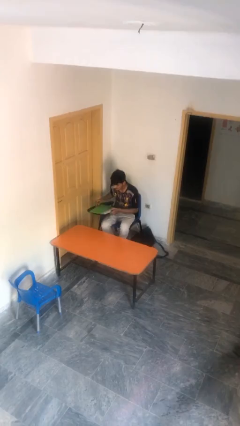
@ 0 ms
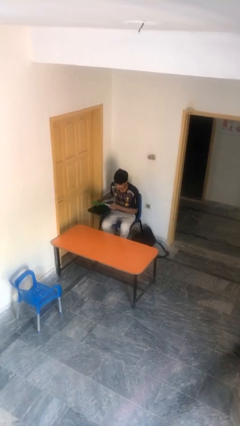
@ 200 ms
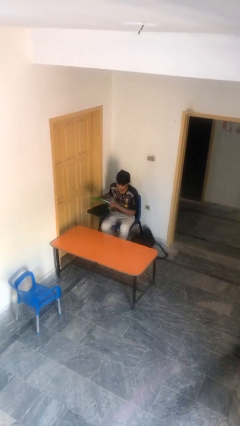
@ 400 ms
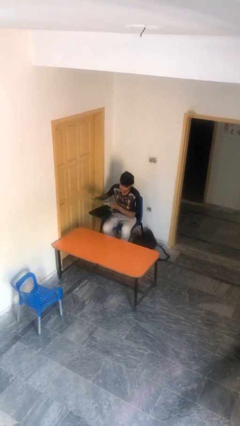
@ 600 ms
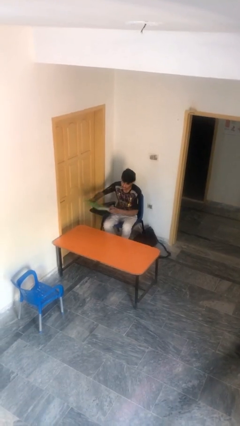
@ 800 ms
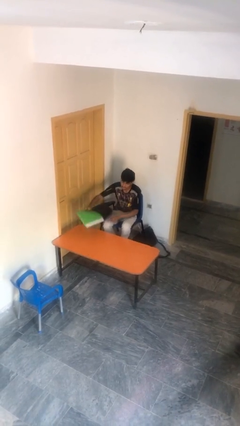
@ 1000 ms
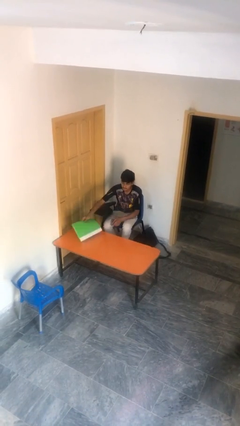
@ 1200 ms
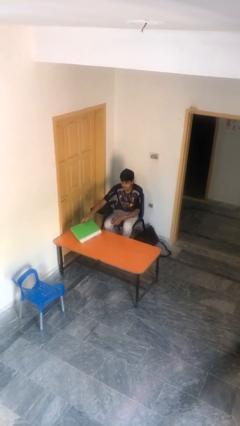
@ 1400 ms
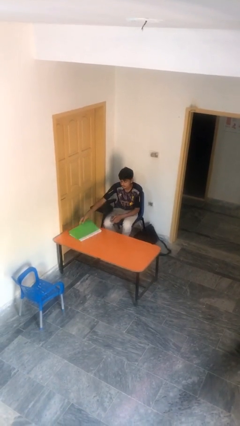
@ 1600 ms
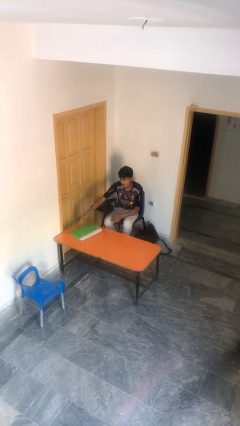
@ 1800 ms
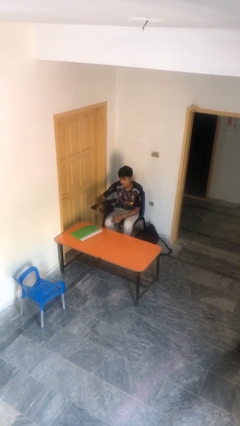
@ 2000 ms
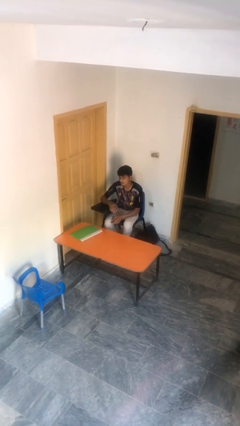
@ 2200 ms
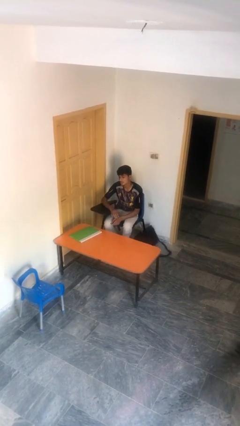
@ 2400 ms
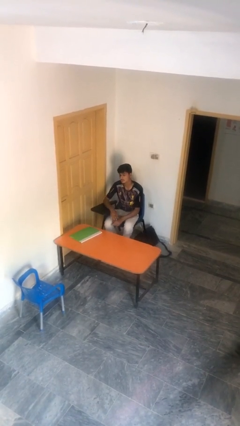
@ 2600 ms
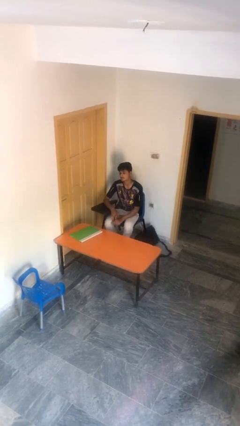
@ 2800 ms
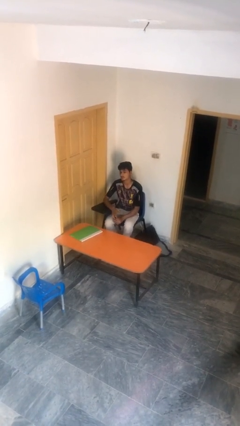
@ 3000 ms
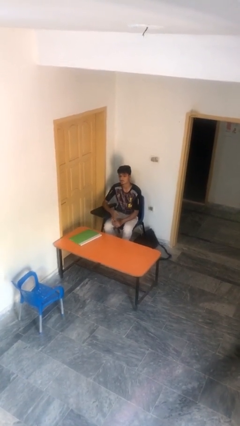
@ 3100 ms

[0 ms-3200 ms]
person puts down object on table

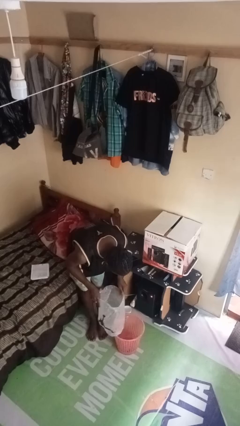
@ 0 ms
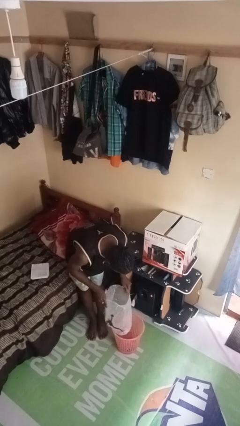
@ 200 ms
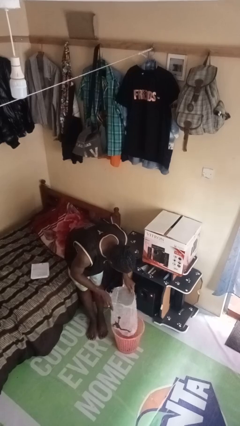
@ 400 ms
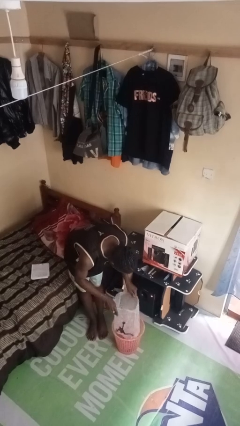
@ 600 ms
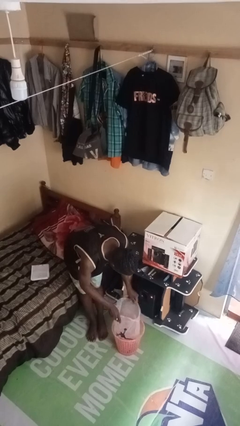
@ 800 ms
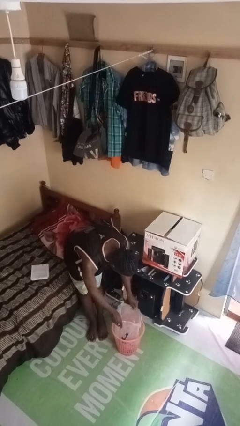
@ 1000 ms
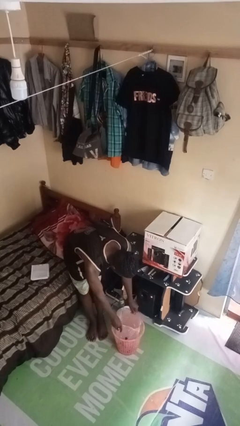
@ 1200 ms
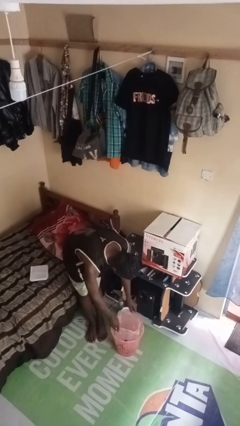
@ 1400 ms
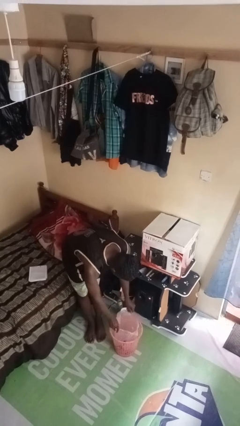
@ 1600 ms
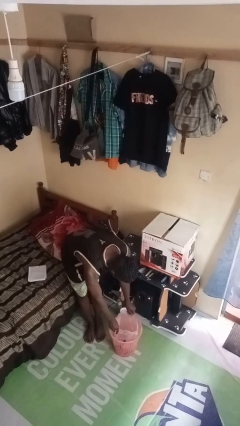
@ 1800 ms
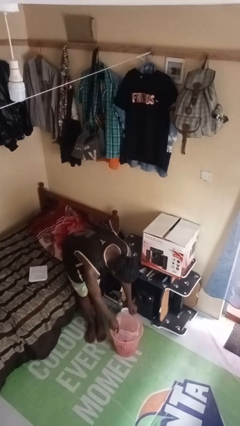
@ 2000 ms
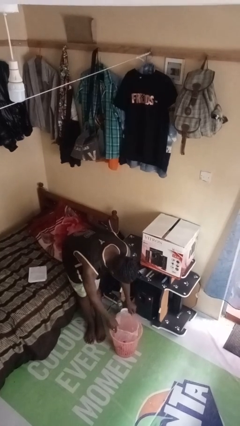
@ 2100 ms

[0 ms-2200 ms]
person inserts trashbag into trashcan

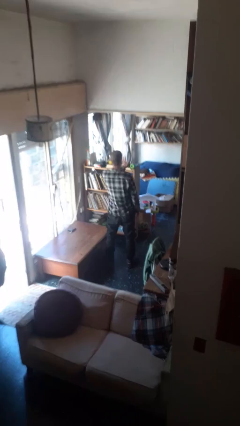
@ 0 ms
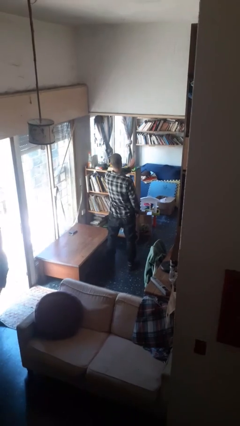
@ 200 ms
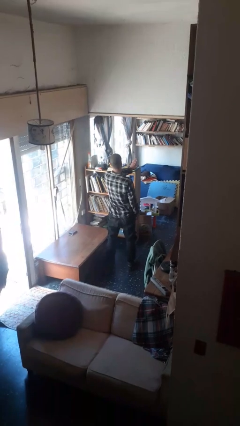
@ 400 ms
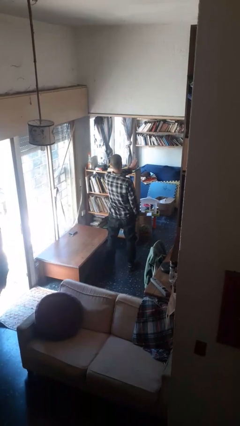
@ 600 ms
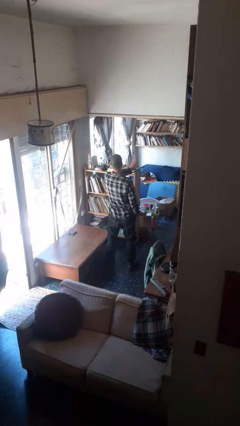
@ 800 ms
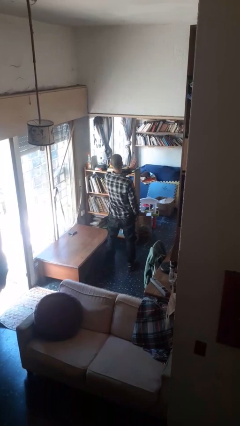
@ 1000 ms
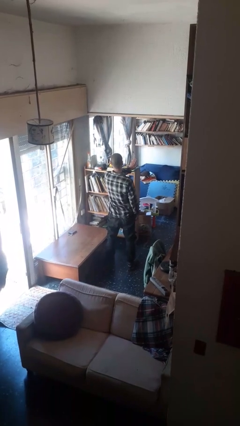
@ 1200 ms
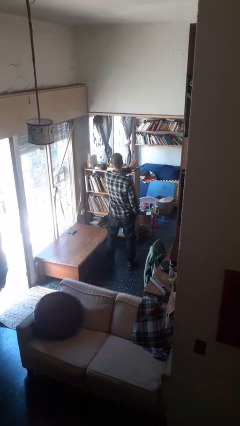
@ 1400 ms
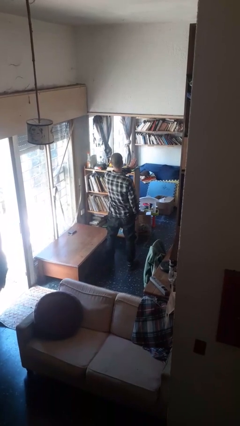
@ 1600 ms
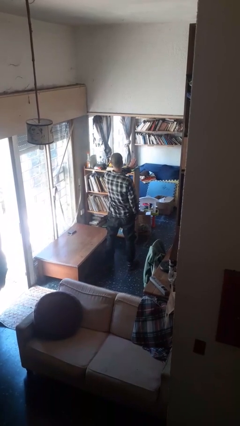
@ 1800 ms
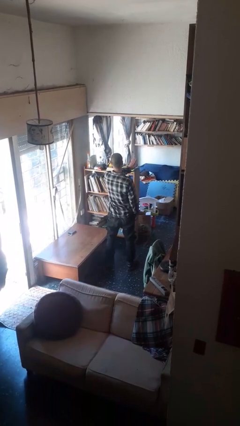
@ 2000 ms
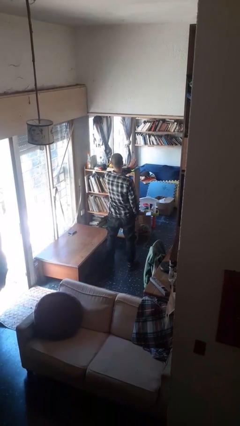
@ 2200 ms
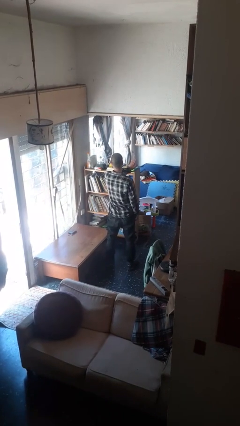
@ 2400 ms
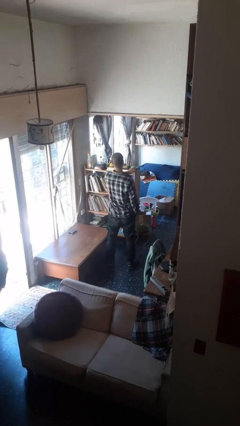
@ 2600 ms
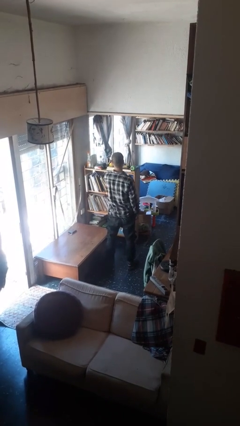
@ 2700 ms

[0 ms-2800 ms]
person gestures stop

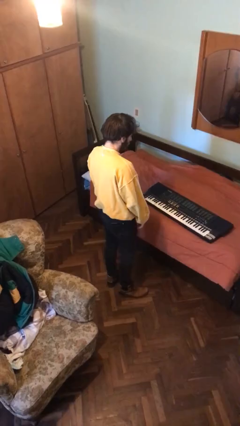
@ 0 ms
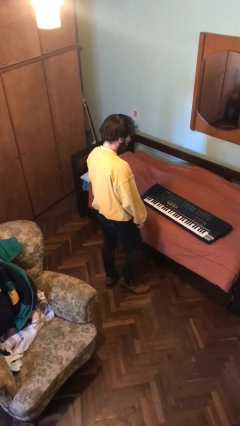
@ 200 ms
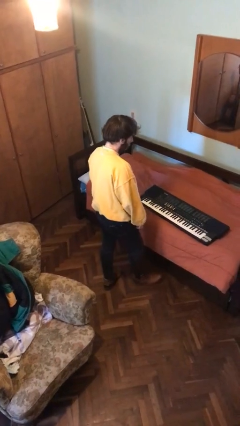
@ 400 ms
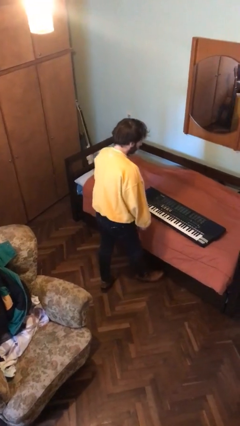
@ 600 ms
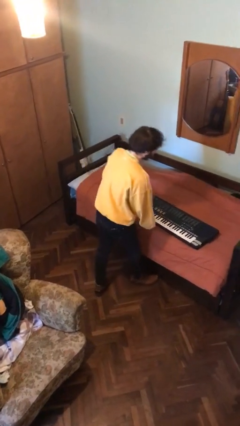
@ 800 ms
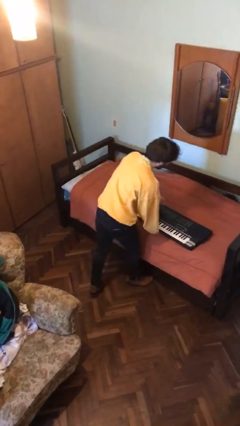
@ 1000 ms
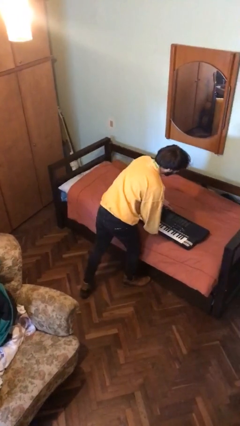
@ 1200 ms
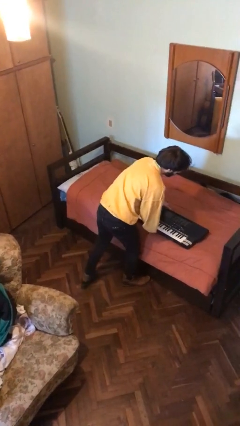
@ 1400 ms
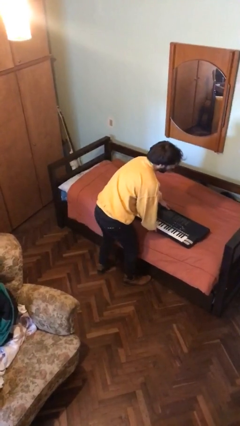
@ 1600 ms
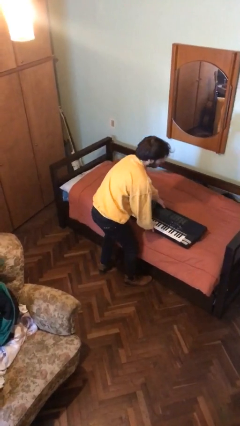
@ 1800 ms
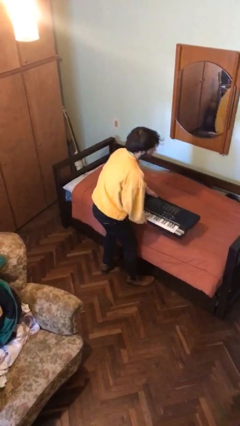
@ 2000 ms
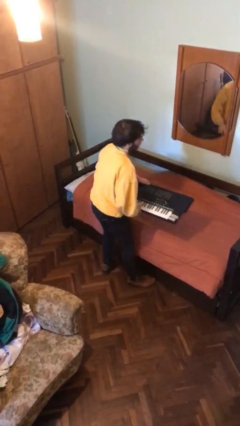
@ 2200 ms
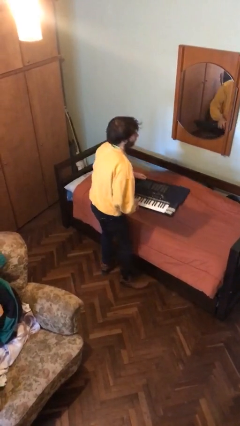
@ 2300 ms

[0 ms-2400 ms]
person picks up object from bed

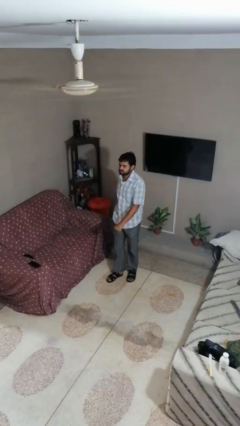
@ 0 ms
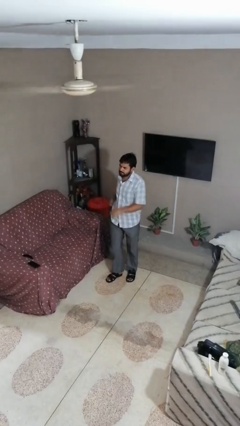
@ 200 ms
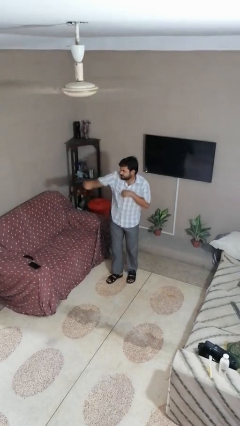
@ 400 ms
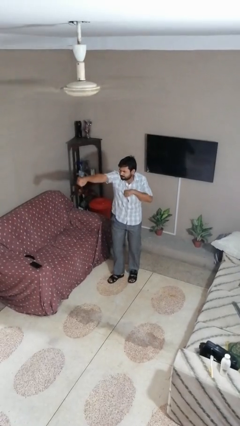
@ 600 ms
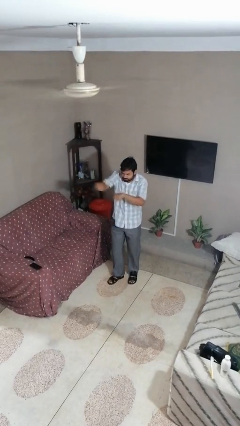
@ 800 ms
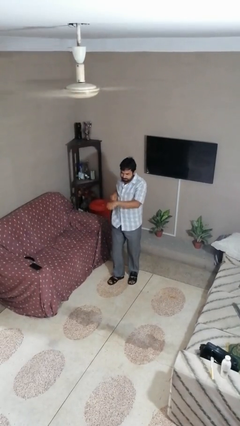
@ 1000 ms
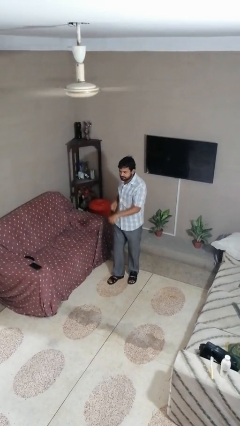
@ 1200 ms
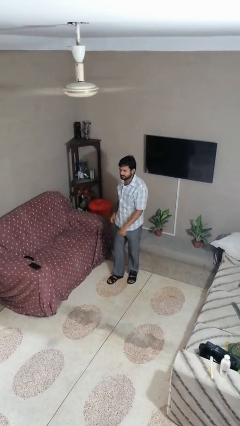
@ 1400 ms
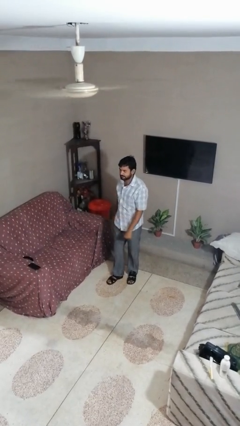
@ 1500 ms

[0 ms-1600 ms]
person karate chop

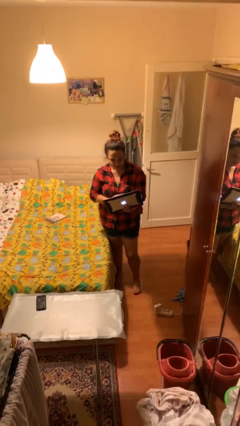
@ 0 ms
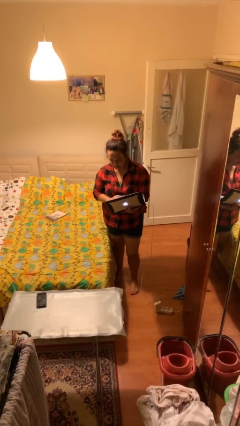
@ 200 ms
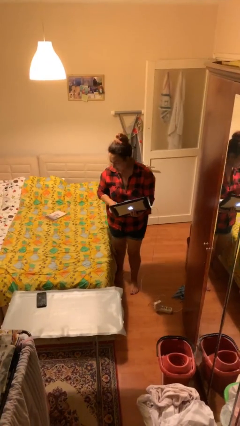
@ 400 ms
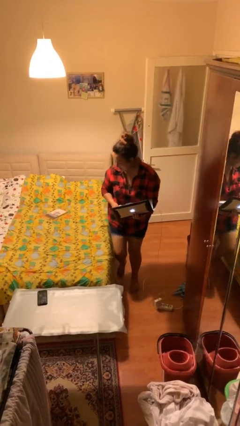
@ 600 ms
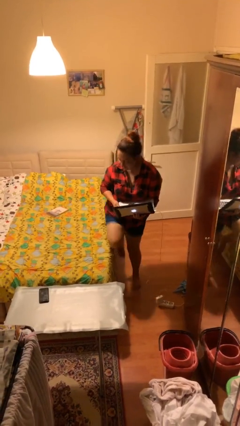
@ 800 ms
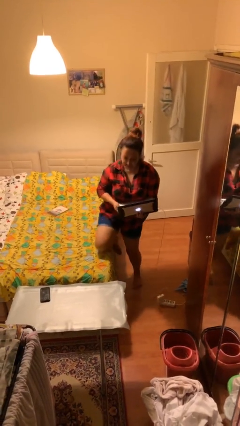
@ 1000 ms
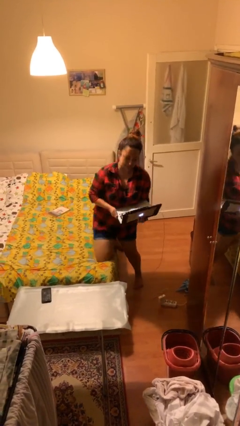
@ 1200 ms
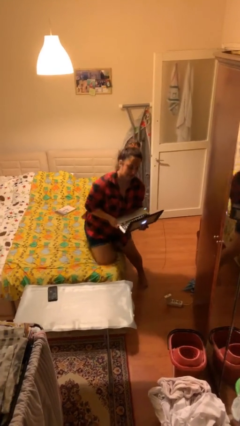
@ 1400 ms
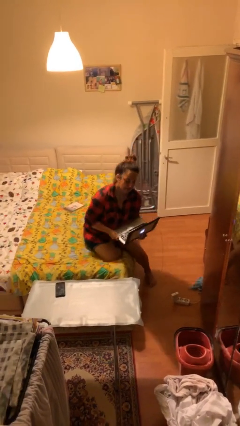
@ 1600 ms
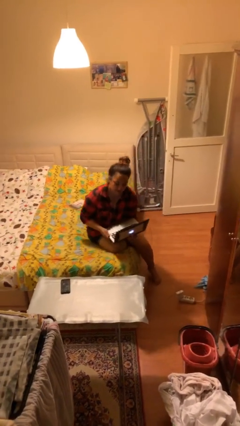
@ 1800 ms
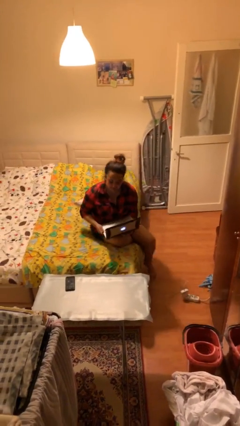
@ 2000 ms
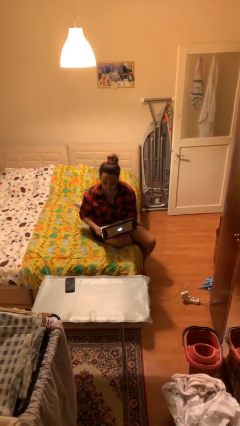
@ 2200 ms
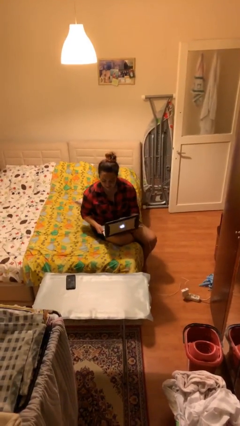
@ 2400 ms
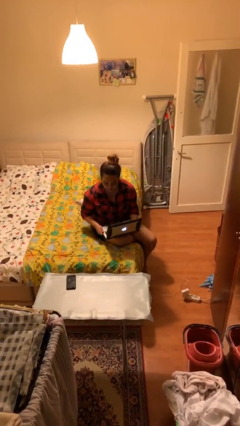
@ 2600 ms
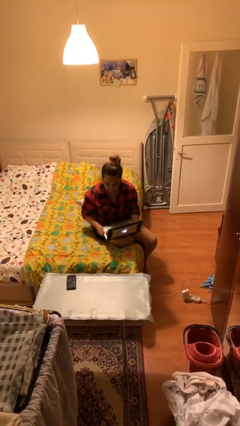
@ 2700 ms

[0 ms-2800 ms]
person sits down

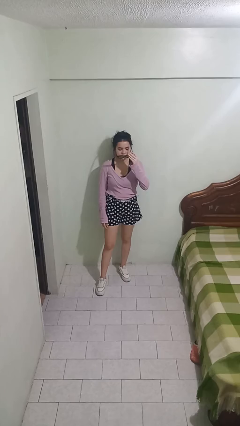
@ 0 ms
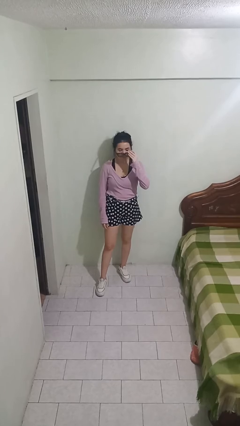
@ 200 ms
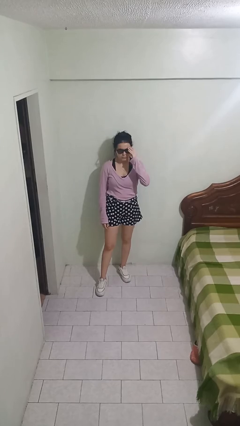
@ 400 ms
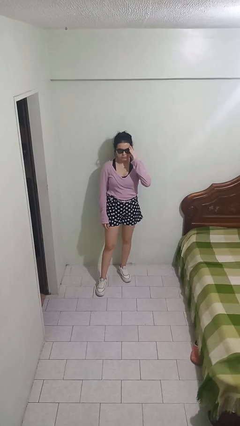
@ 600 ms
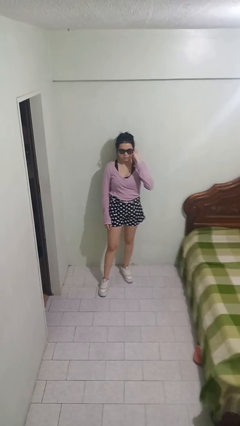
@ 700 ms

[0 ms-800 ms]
person puts on sunglasses

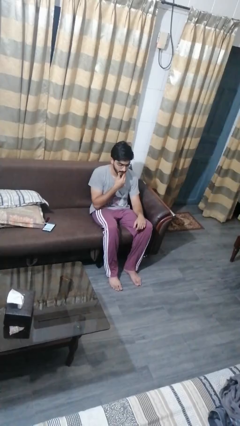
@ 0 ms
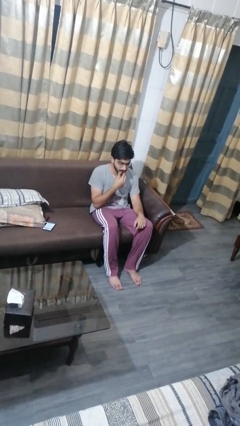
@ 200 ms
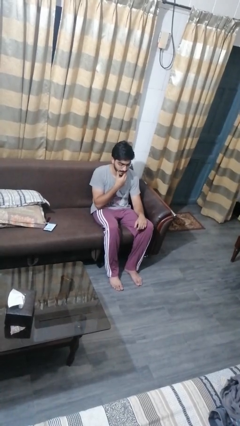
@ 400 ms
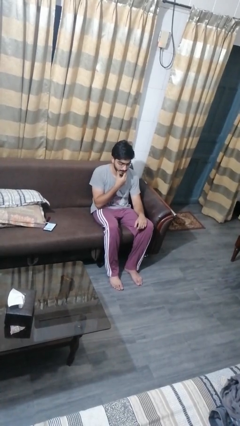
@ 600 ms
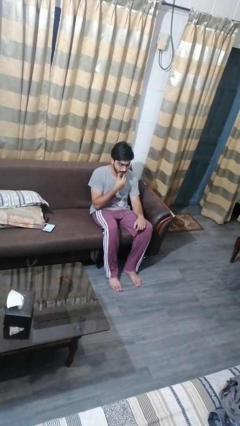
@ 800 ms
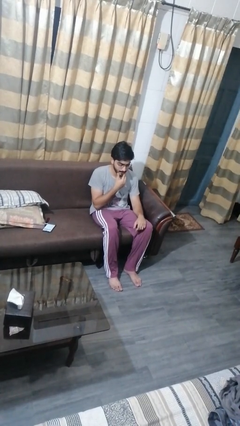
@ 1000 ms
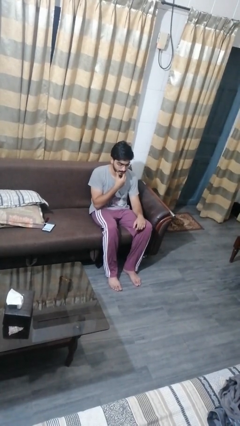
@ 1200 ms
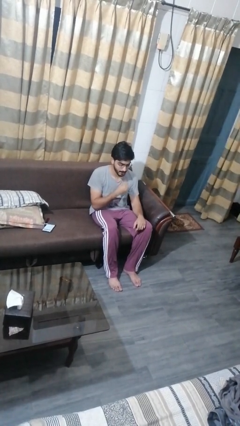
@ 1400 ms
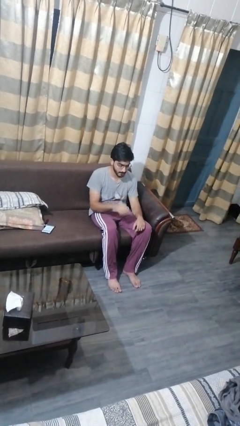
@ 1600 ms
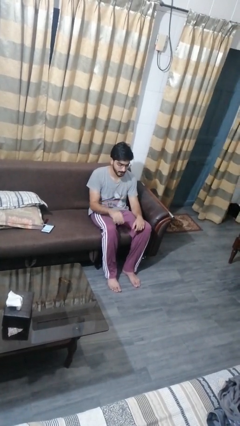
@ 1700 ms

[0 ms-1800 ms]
person strokes chin
